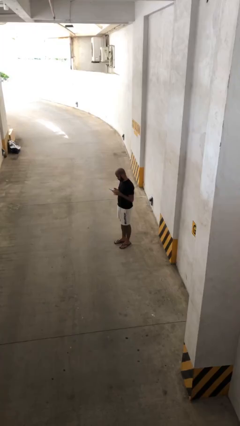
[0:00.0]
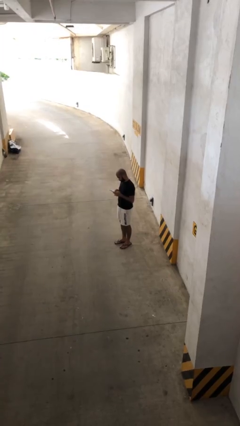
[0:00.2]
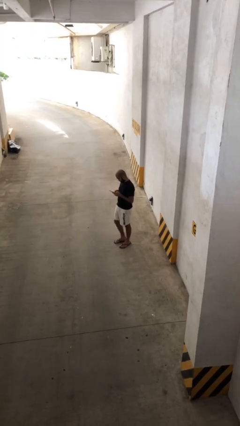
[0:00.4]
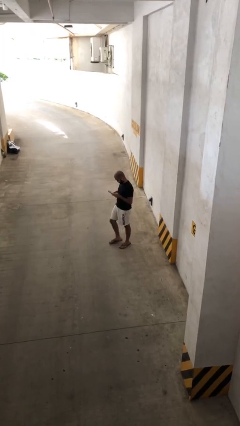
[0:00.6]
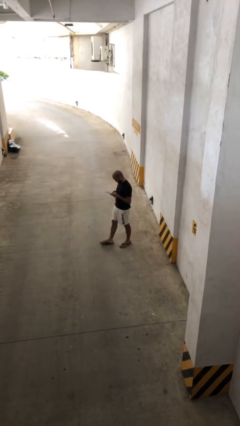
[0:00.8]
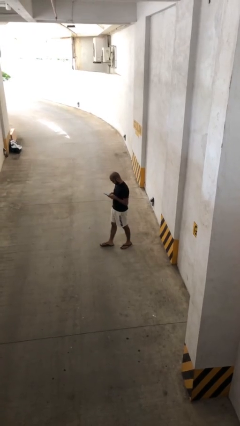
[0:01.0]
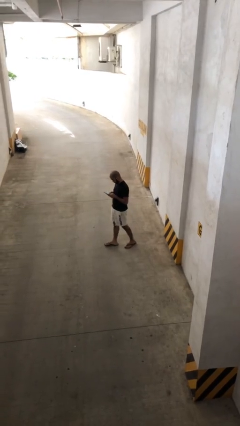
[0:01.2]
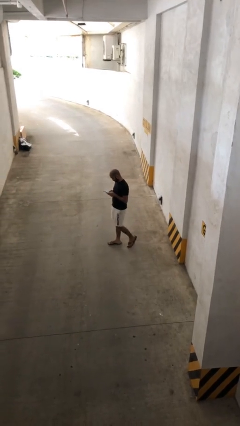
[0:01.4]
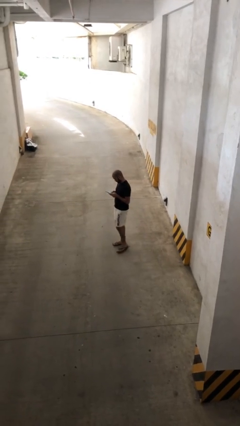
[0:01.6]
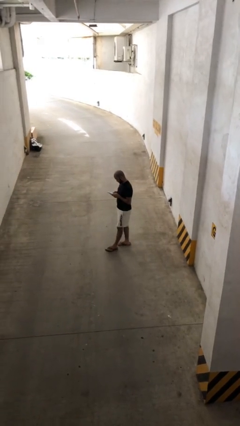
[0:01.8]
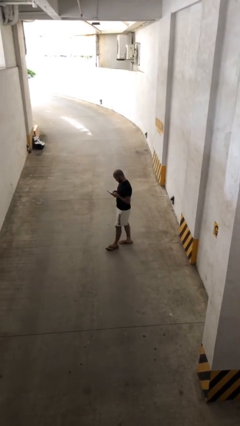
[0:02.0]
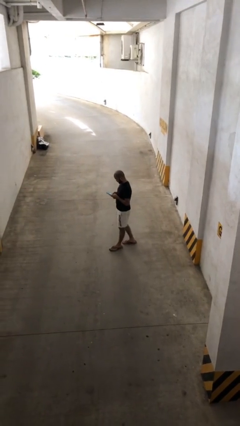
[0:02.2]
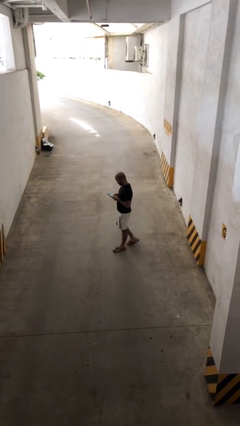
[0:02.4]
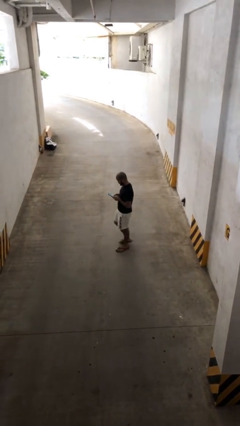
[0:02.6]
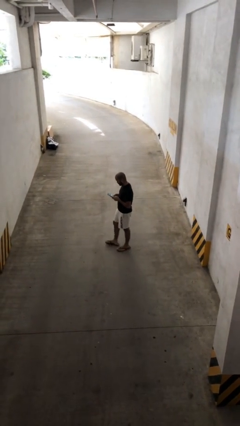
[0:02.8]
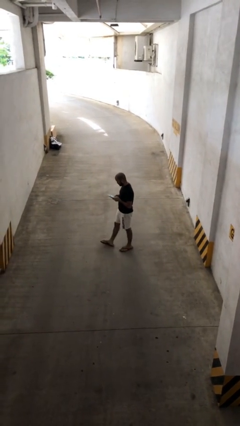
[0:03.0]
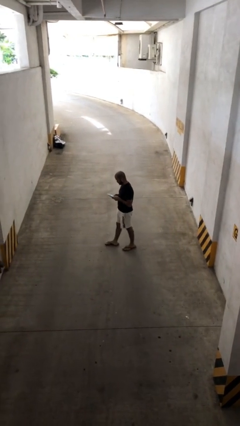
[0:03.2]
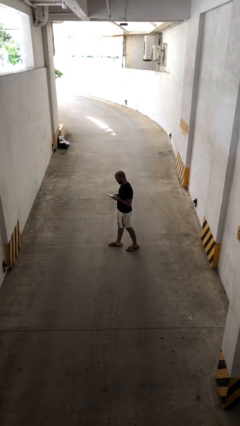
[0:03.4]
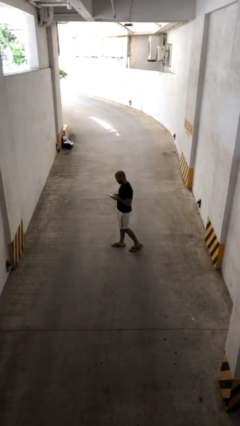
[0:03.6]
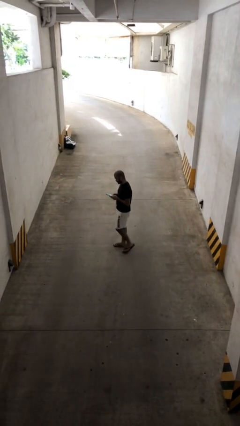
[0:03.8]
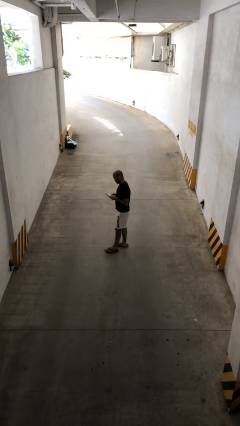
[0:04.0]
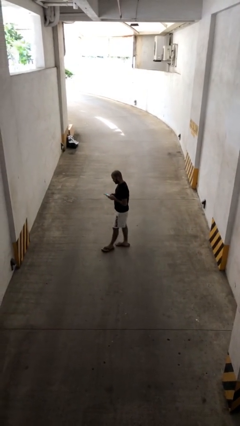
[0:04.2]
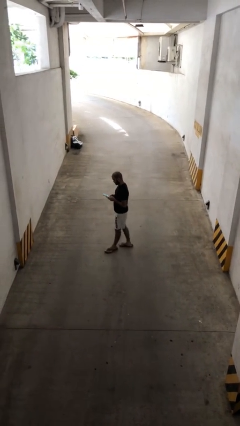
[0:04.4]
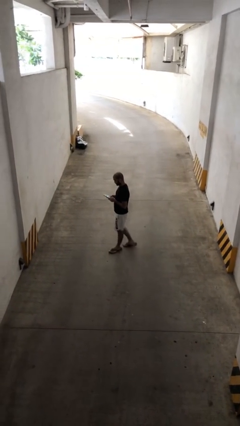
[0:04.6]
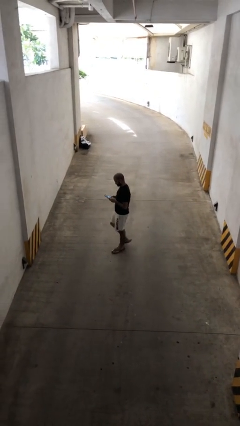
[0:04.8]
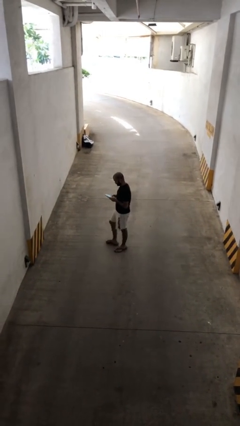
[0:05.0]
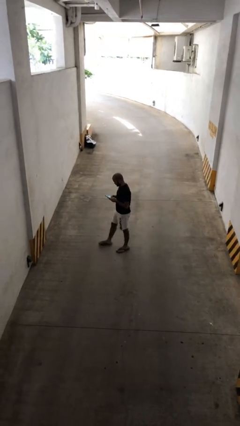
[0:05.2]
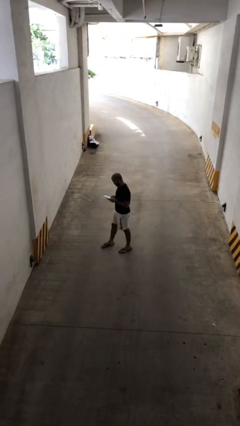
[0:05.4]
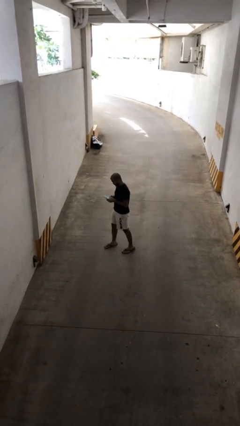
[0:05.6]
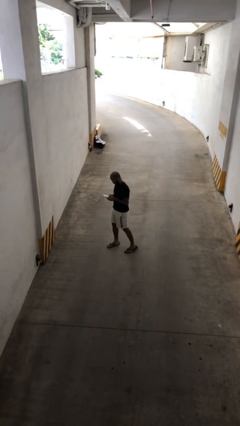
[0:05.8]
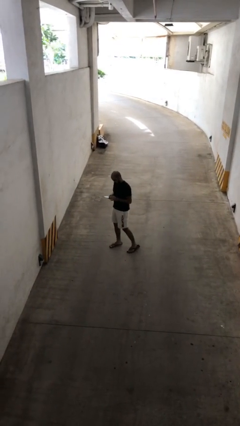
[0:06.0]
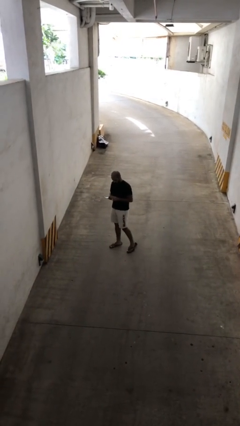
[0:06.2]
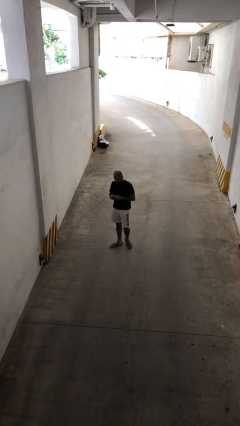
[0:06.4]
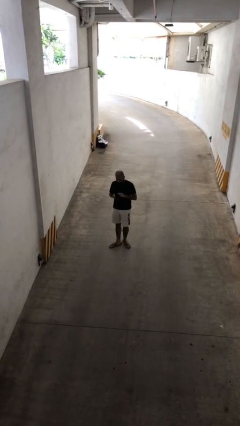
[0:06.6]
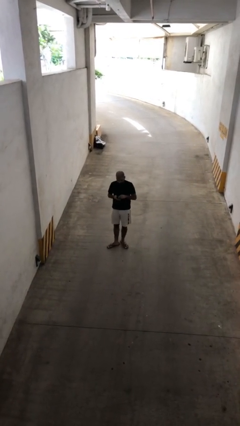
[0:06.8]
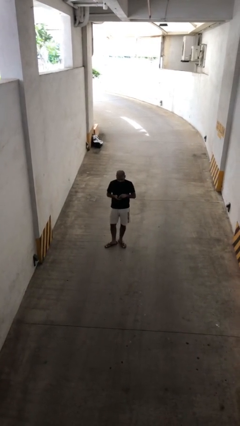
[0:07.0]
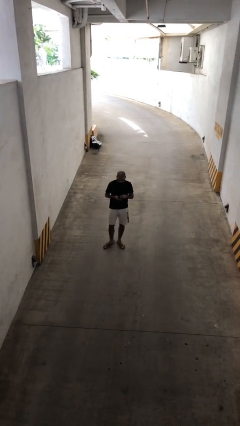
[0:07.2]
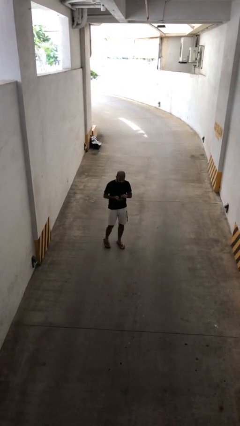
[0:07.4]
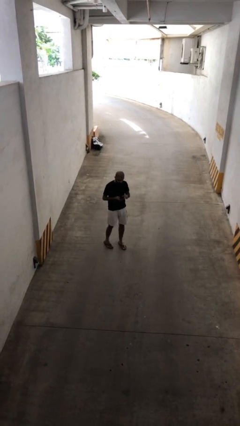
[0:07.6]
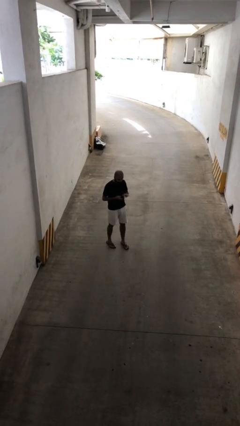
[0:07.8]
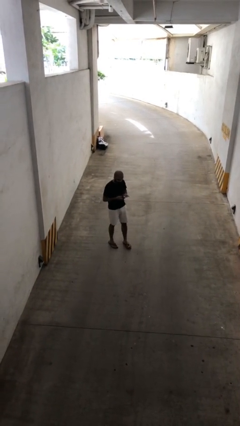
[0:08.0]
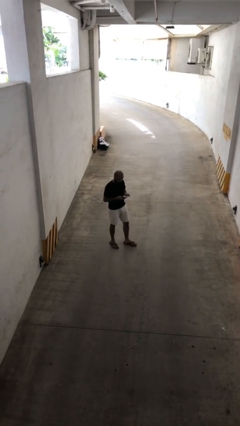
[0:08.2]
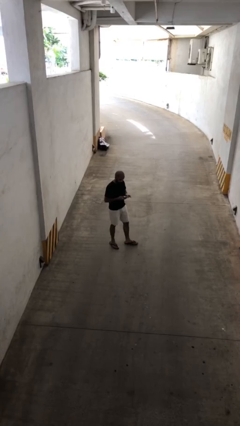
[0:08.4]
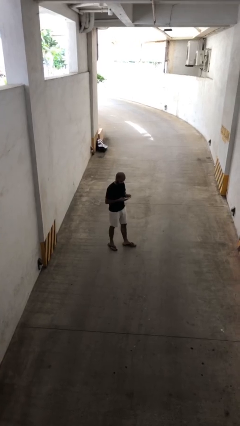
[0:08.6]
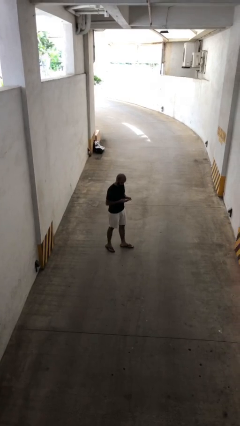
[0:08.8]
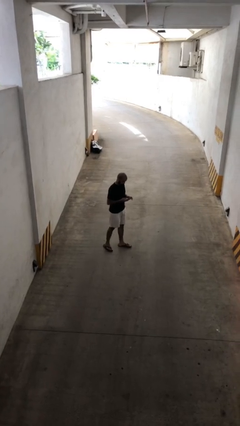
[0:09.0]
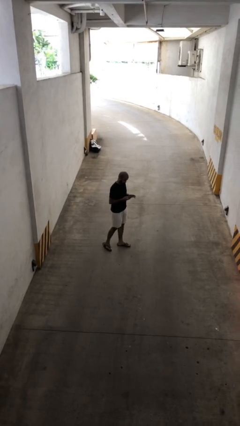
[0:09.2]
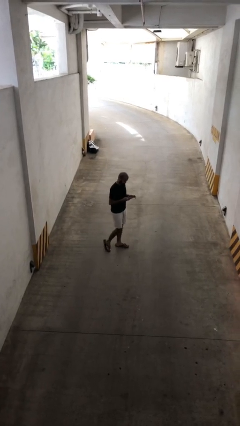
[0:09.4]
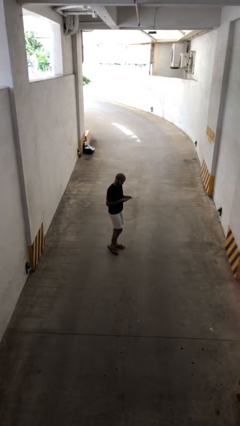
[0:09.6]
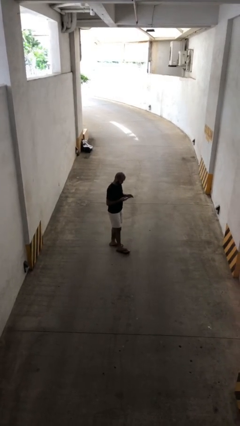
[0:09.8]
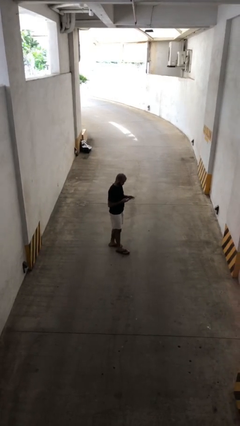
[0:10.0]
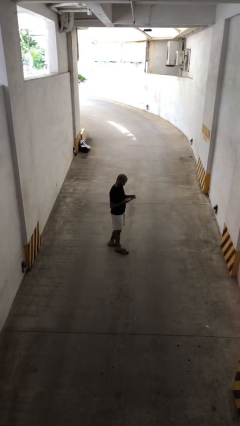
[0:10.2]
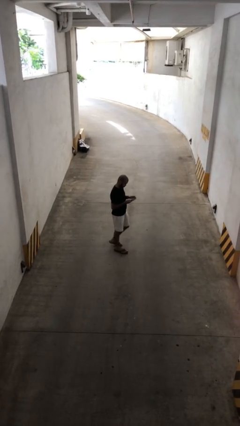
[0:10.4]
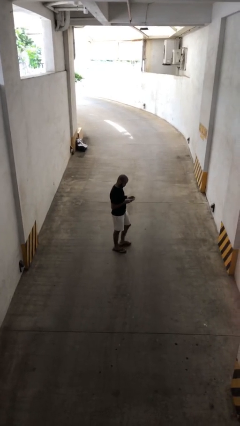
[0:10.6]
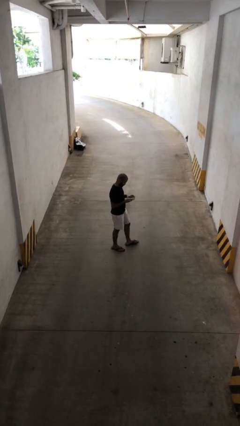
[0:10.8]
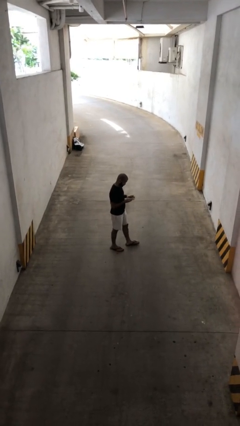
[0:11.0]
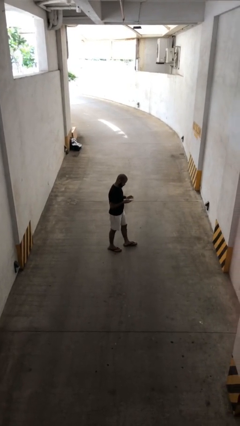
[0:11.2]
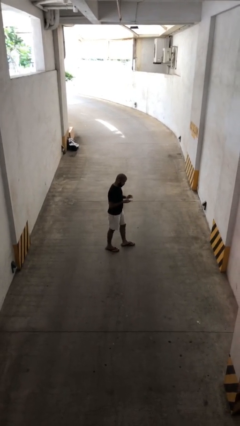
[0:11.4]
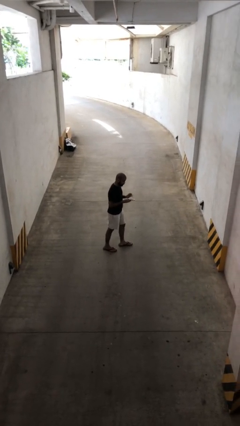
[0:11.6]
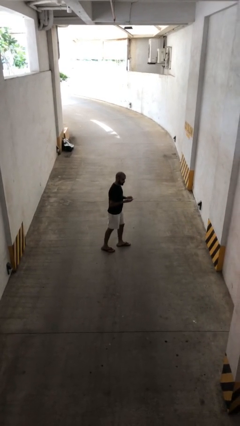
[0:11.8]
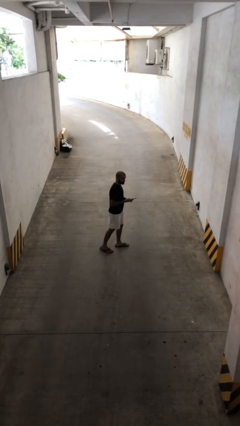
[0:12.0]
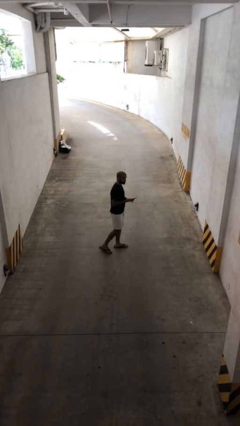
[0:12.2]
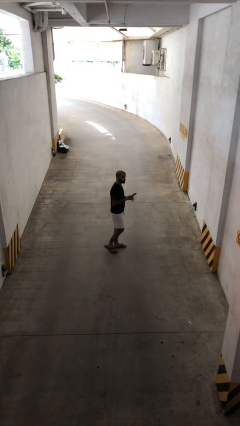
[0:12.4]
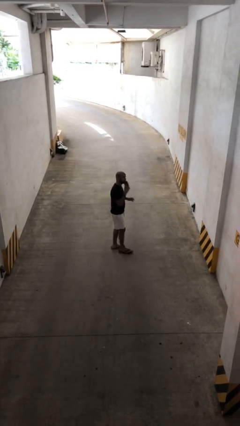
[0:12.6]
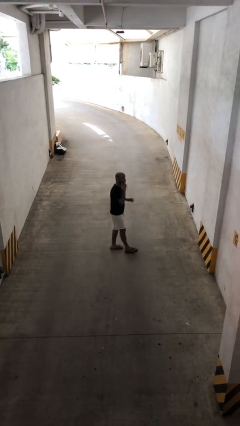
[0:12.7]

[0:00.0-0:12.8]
person texts on phone

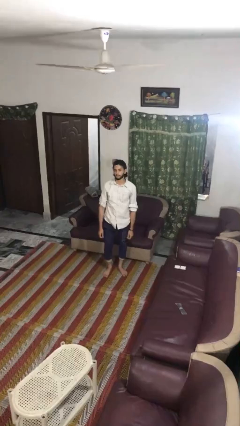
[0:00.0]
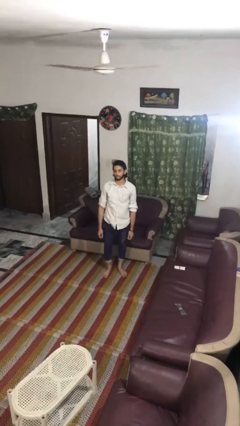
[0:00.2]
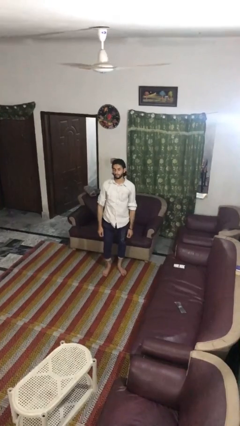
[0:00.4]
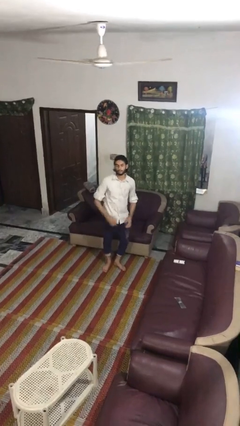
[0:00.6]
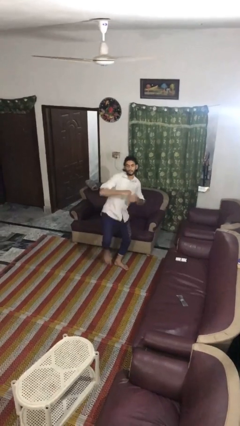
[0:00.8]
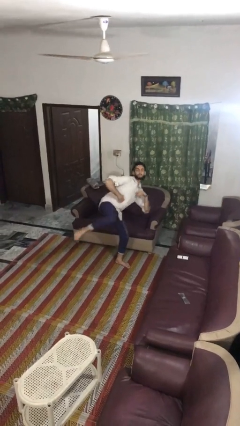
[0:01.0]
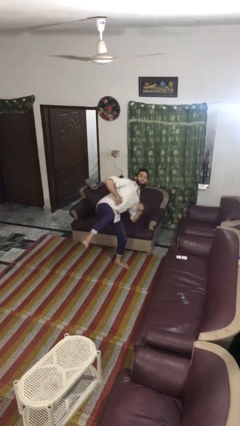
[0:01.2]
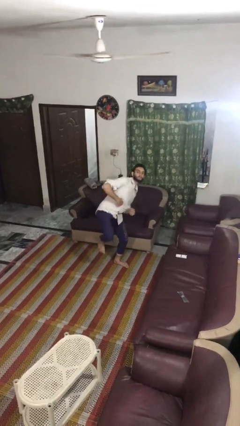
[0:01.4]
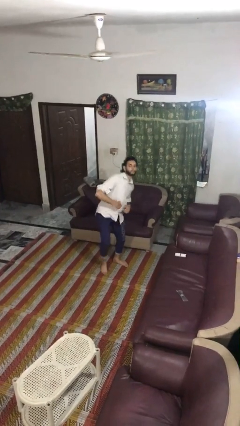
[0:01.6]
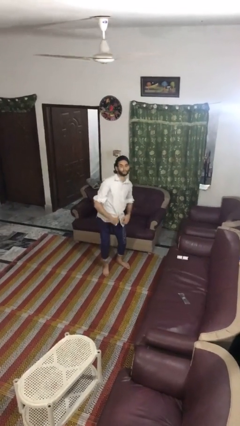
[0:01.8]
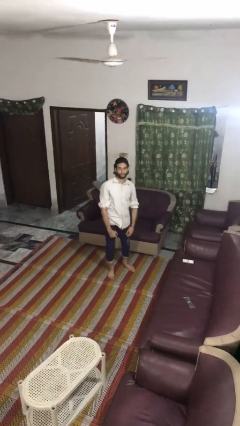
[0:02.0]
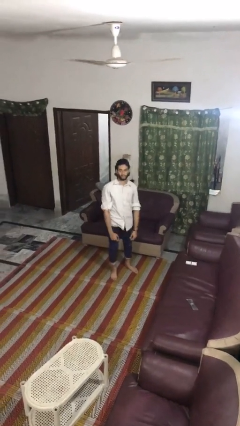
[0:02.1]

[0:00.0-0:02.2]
person karate kicks

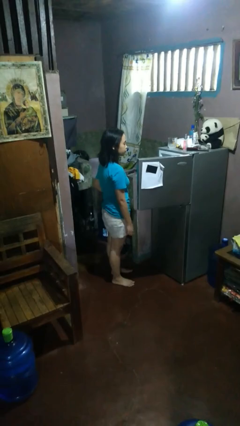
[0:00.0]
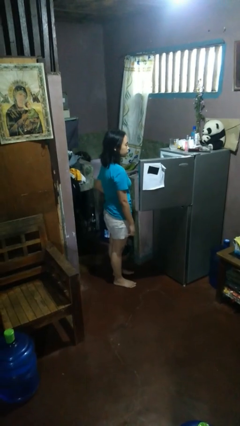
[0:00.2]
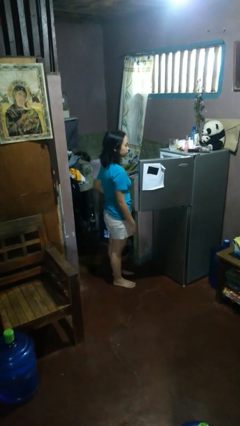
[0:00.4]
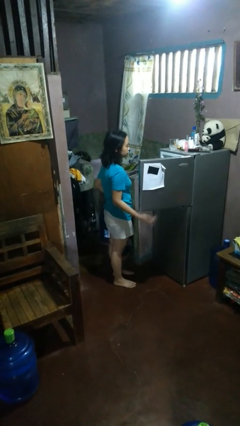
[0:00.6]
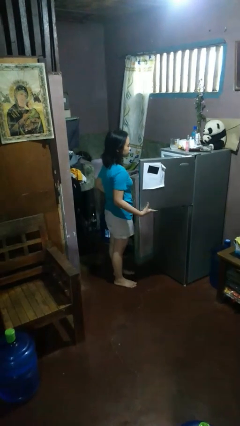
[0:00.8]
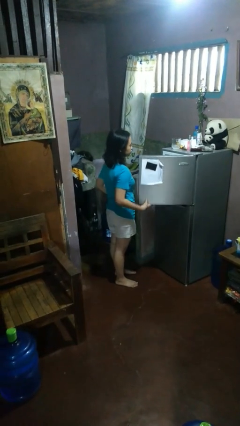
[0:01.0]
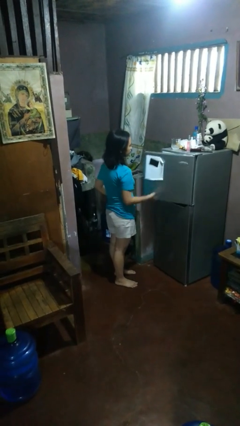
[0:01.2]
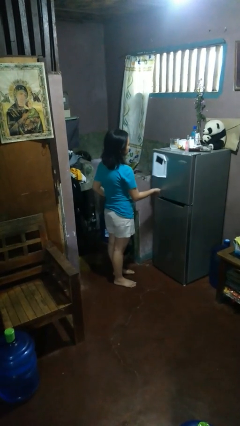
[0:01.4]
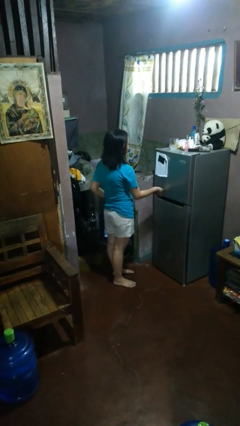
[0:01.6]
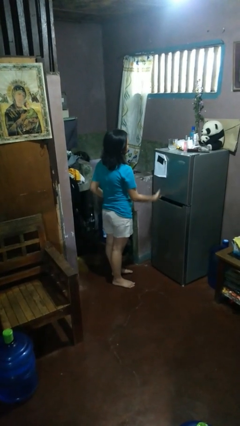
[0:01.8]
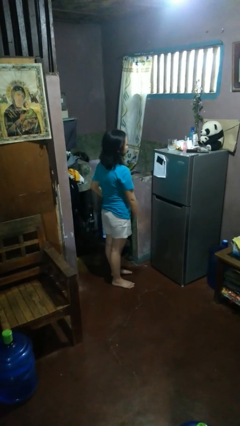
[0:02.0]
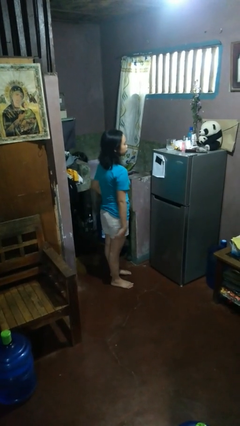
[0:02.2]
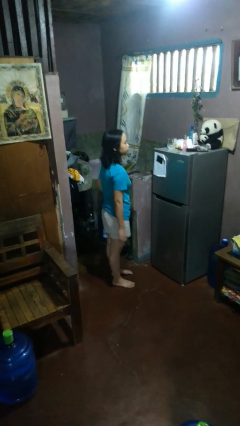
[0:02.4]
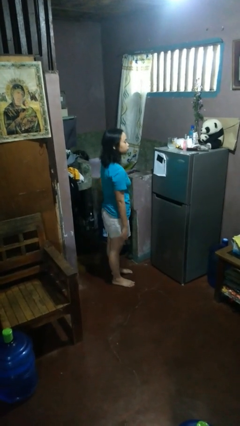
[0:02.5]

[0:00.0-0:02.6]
person closes refrigerator

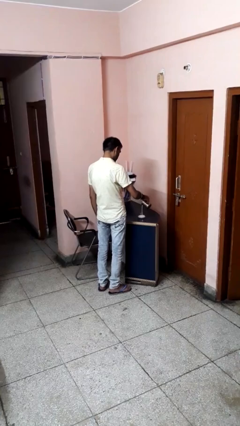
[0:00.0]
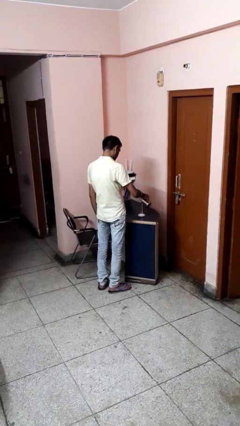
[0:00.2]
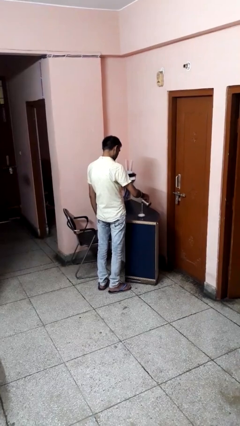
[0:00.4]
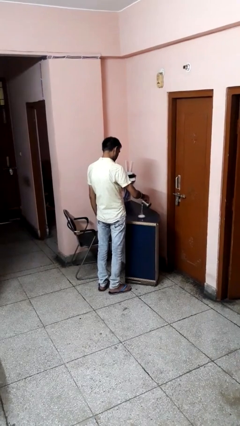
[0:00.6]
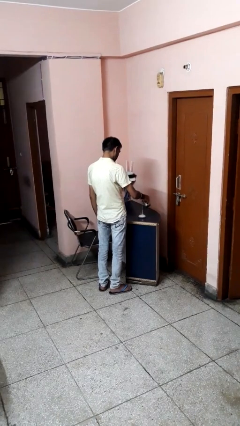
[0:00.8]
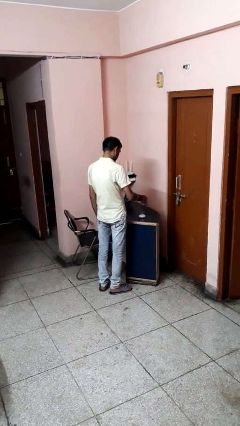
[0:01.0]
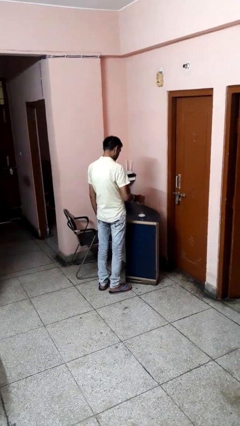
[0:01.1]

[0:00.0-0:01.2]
person pours into bowl
